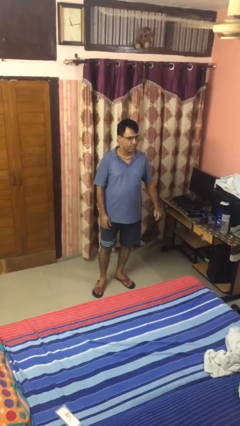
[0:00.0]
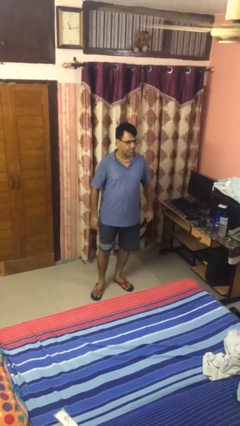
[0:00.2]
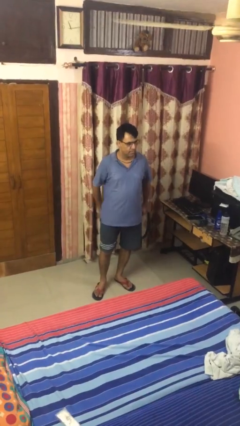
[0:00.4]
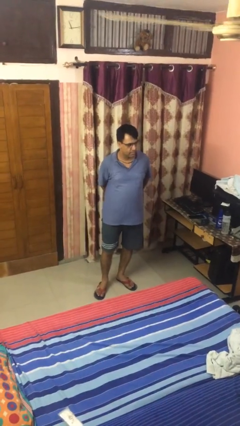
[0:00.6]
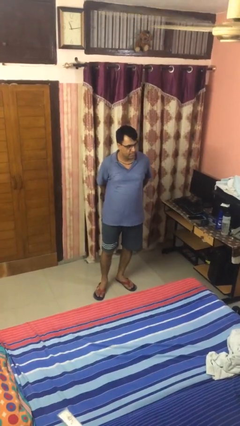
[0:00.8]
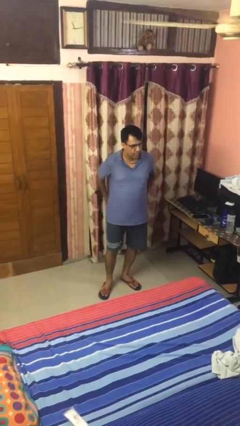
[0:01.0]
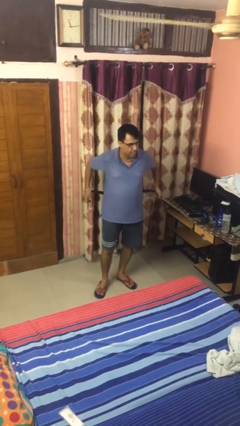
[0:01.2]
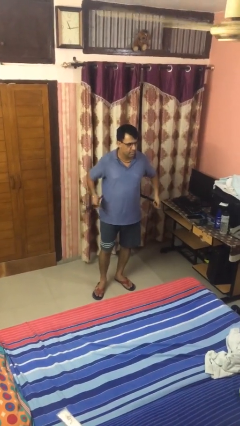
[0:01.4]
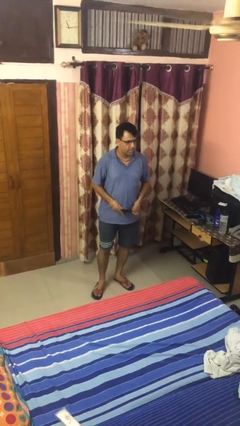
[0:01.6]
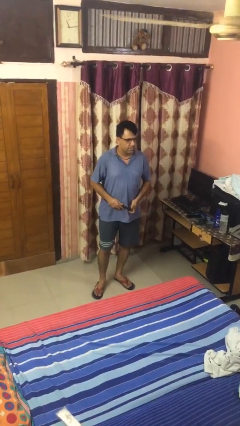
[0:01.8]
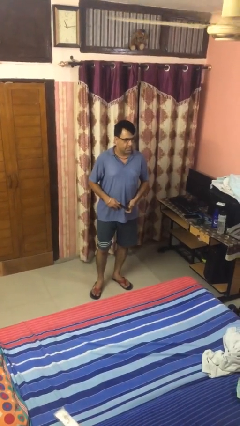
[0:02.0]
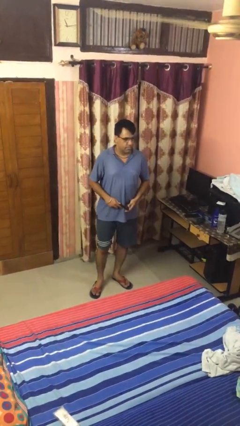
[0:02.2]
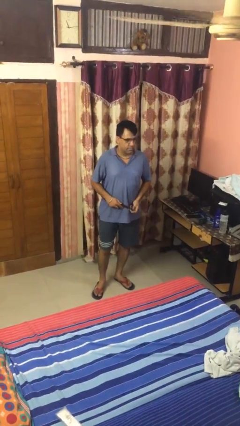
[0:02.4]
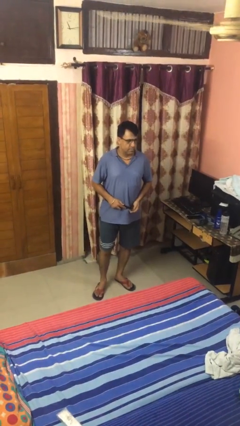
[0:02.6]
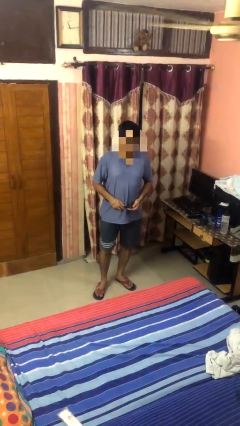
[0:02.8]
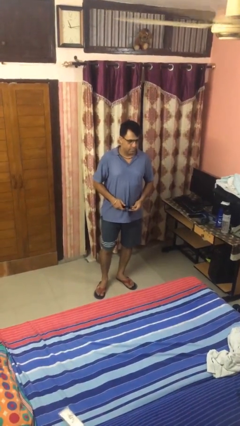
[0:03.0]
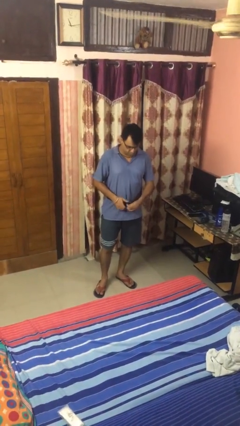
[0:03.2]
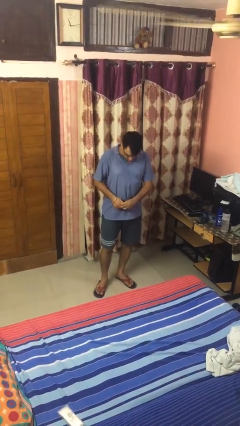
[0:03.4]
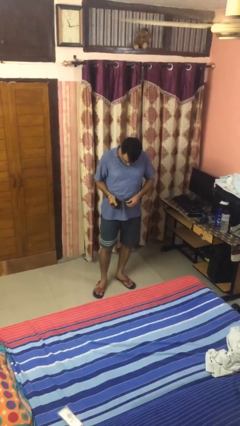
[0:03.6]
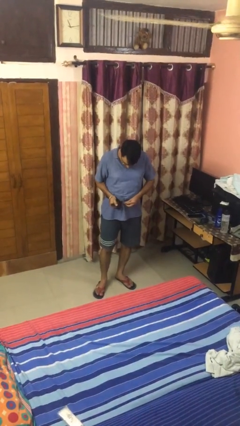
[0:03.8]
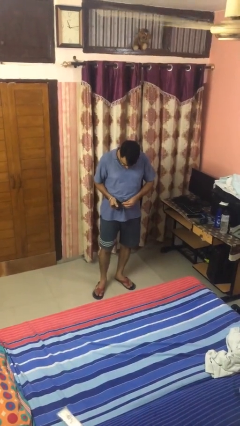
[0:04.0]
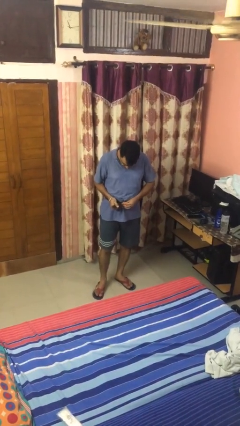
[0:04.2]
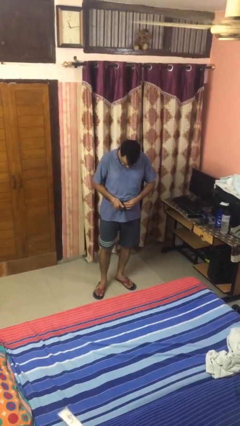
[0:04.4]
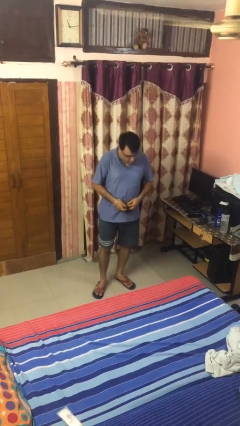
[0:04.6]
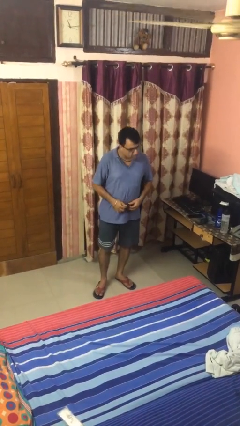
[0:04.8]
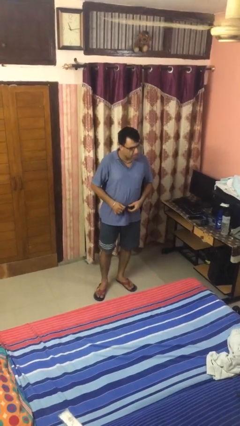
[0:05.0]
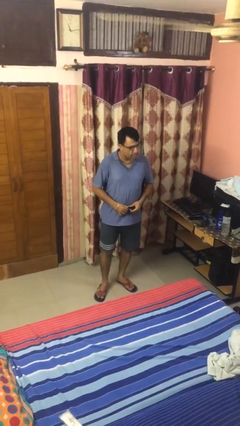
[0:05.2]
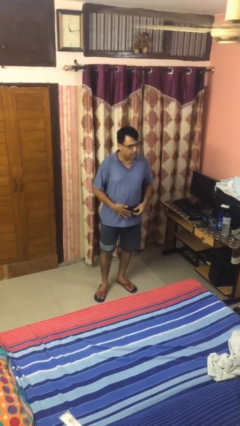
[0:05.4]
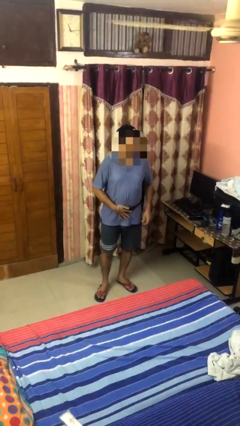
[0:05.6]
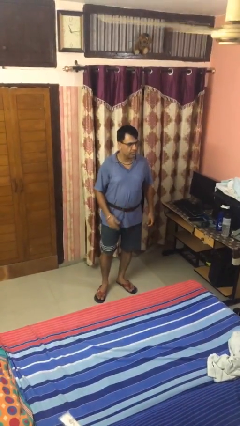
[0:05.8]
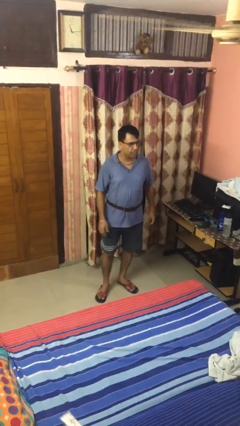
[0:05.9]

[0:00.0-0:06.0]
person puts on belt

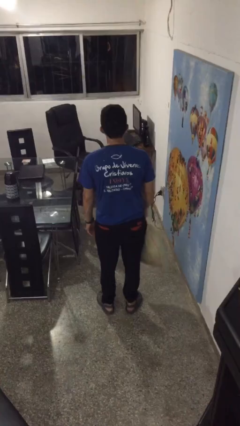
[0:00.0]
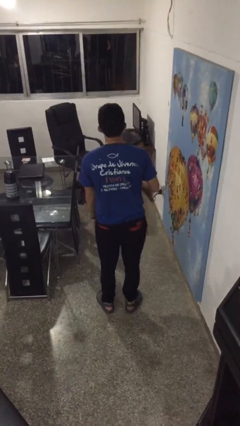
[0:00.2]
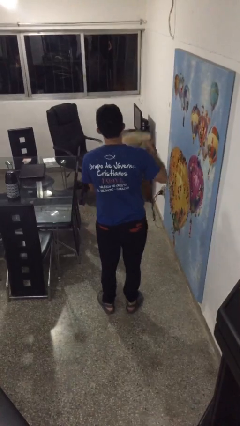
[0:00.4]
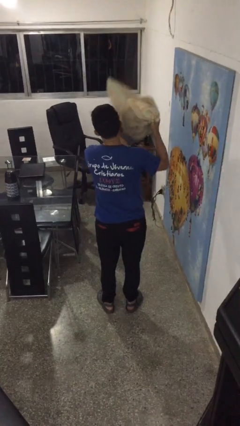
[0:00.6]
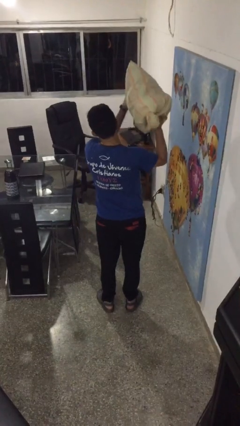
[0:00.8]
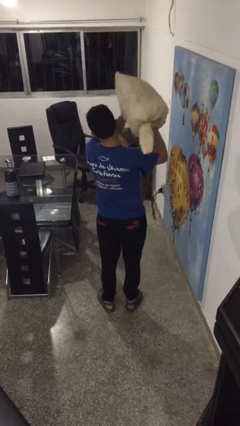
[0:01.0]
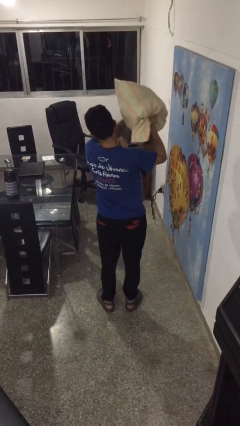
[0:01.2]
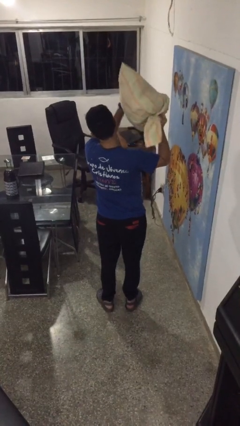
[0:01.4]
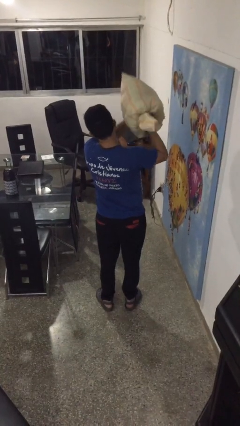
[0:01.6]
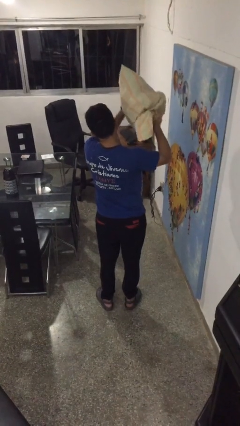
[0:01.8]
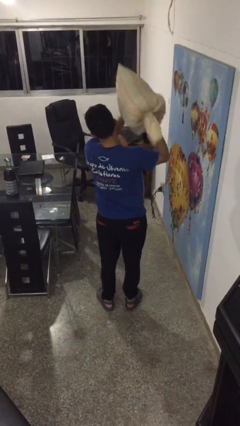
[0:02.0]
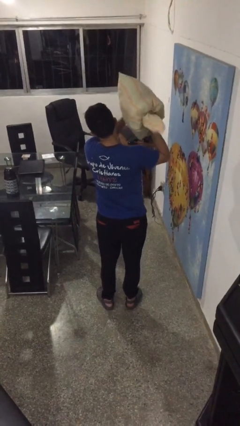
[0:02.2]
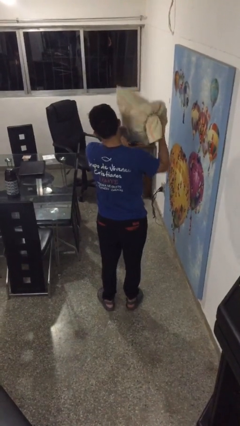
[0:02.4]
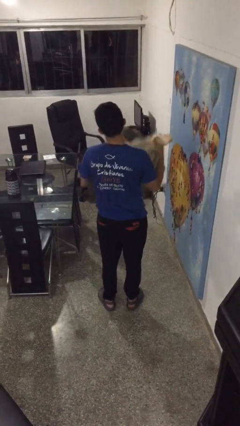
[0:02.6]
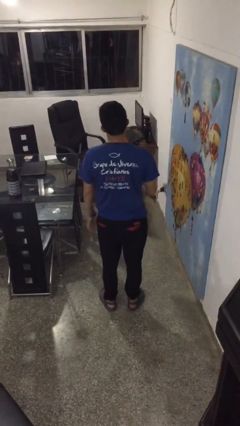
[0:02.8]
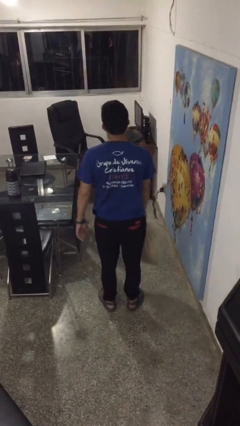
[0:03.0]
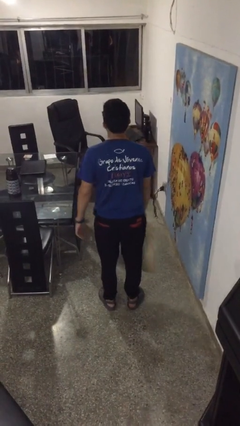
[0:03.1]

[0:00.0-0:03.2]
person squeezes object

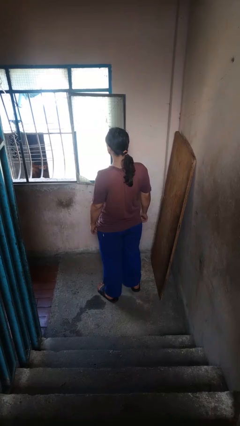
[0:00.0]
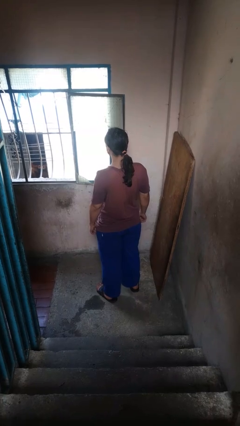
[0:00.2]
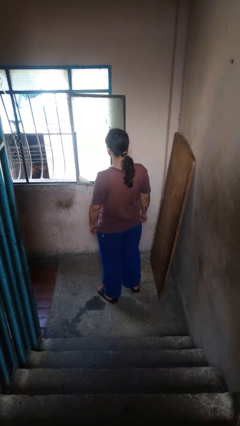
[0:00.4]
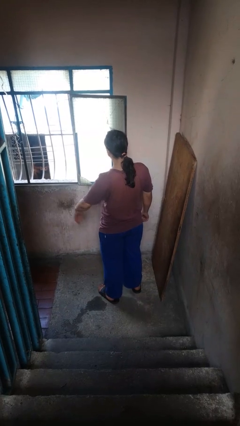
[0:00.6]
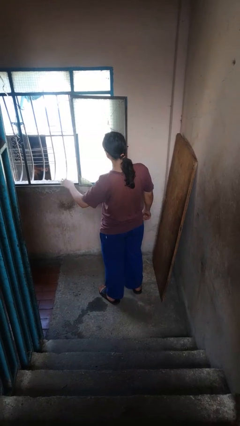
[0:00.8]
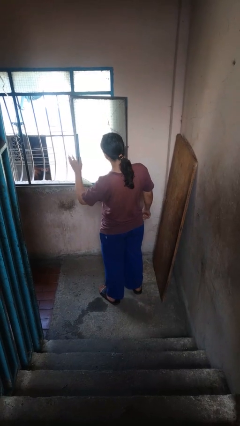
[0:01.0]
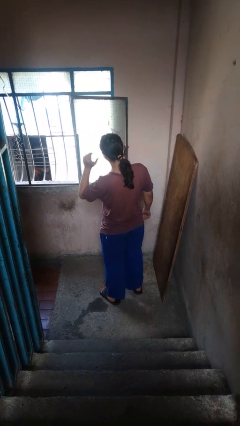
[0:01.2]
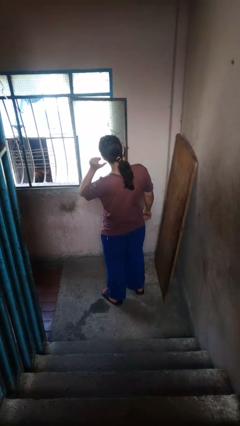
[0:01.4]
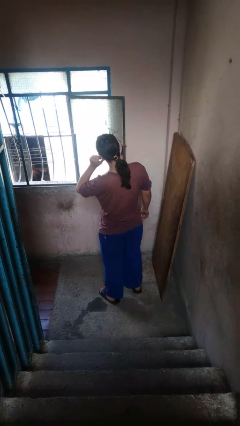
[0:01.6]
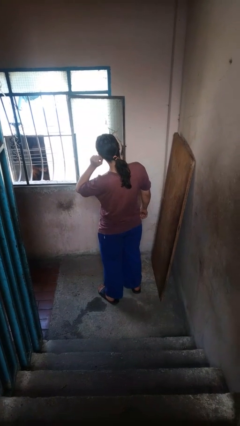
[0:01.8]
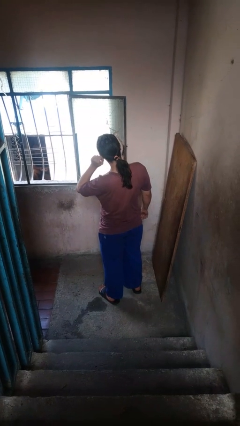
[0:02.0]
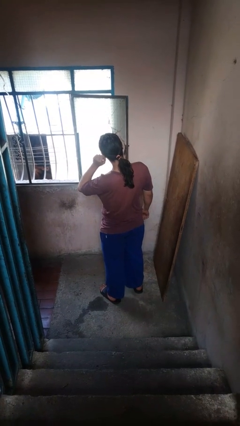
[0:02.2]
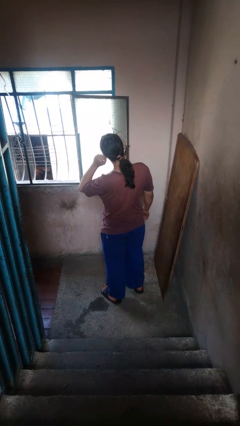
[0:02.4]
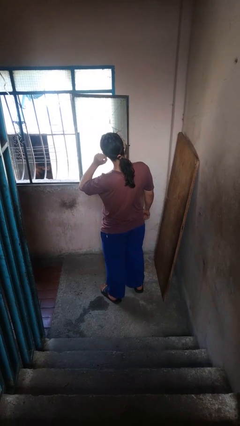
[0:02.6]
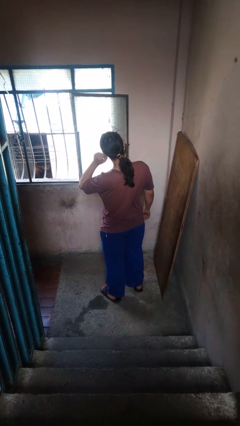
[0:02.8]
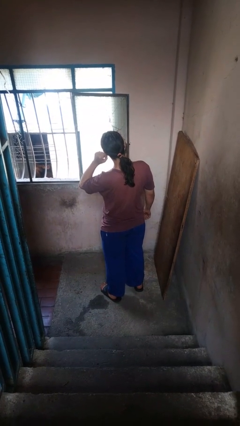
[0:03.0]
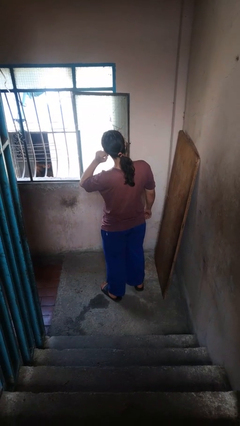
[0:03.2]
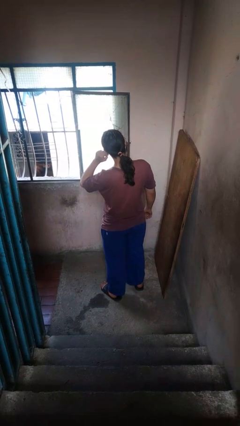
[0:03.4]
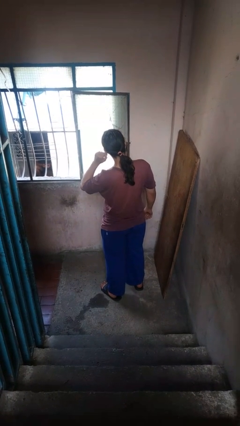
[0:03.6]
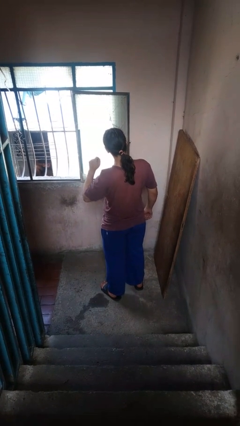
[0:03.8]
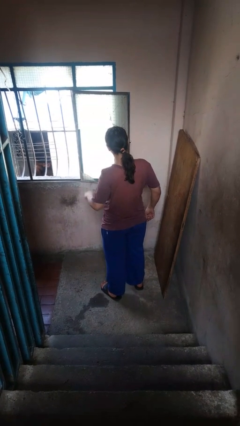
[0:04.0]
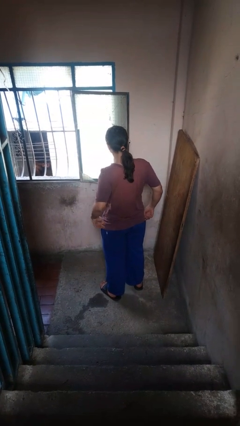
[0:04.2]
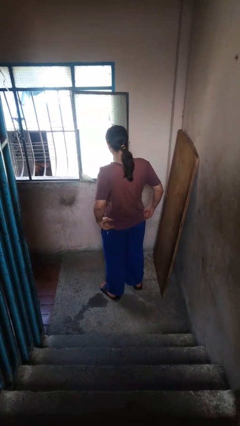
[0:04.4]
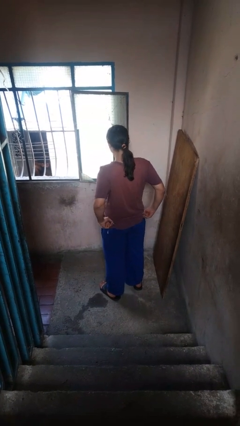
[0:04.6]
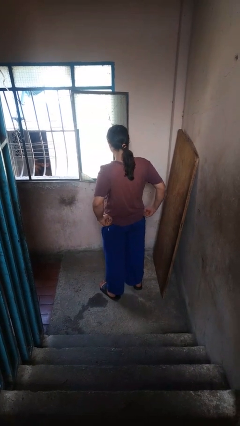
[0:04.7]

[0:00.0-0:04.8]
person touches earlobe

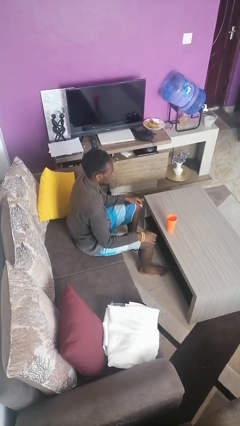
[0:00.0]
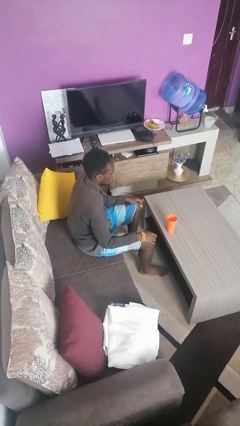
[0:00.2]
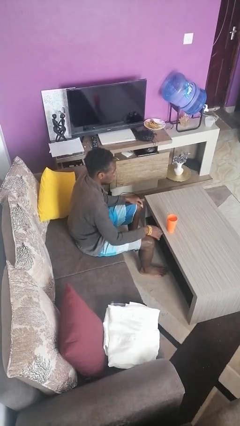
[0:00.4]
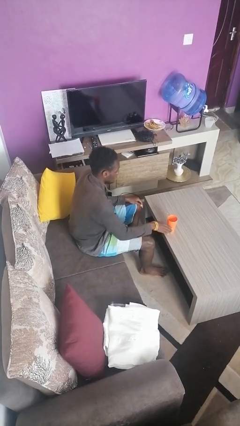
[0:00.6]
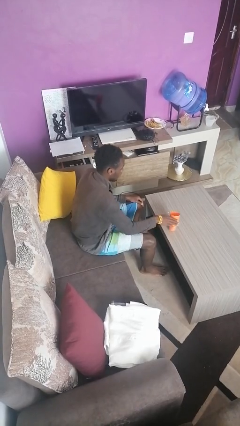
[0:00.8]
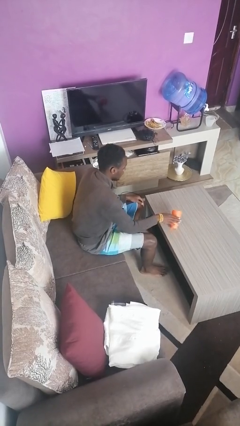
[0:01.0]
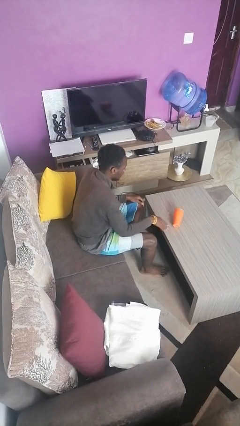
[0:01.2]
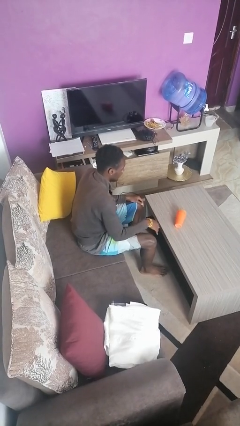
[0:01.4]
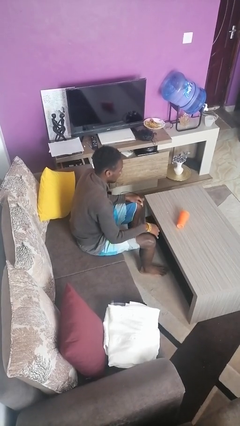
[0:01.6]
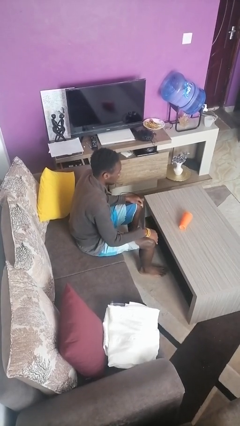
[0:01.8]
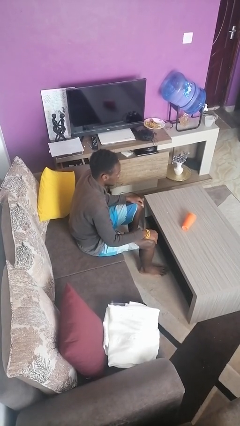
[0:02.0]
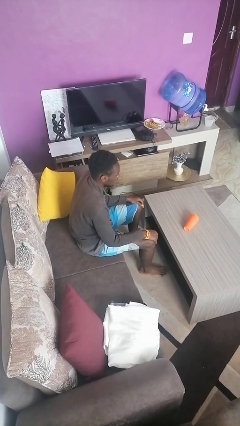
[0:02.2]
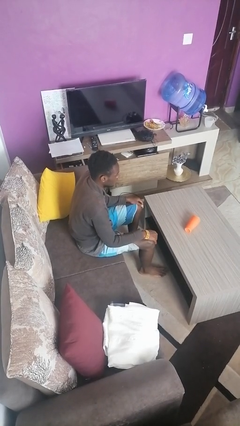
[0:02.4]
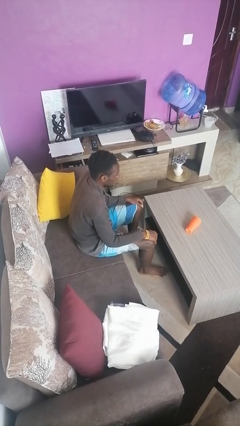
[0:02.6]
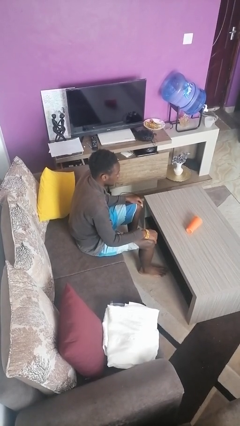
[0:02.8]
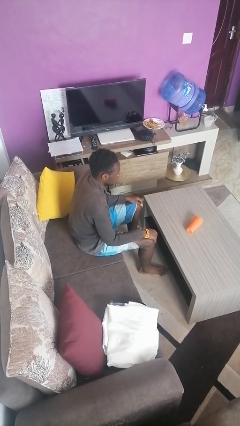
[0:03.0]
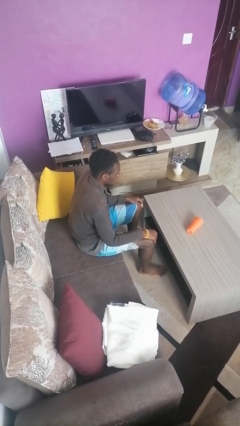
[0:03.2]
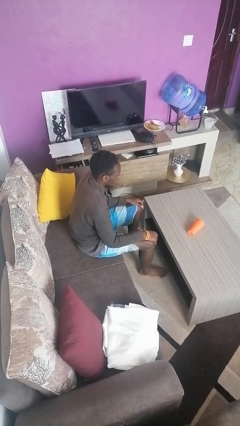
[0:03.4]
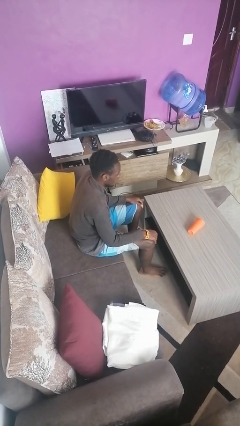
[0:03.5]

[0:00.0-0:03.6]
person knocks over glass
